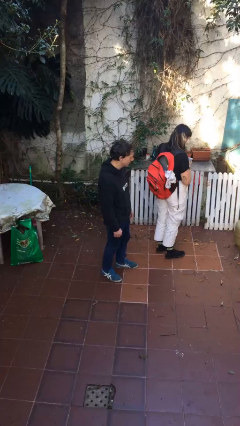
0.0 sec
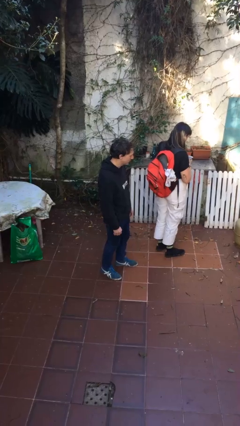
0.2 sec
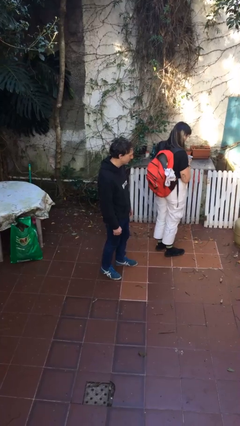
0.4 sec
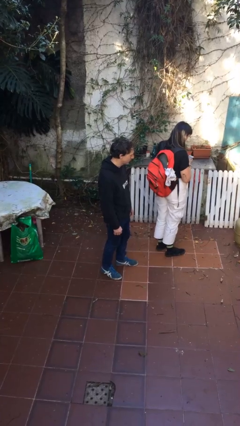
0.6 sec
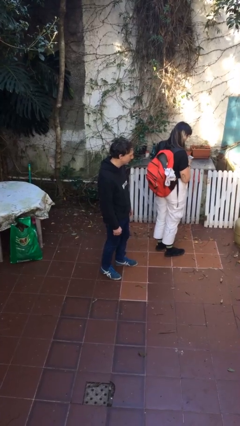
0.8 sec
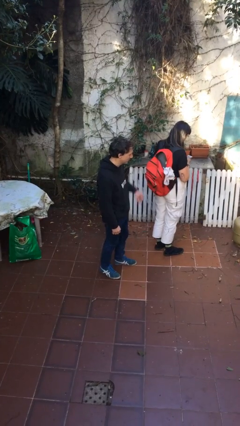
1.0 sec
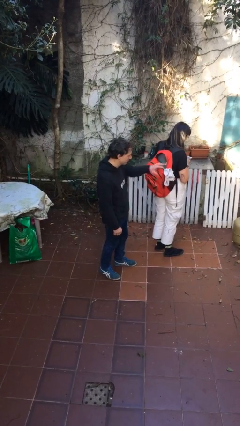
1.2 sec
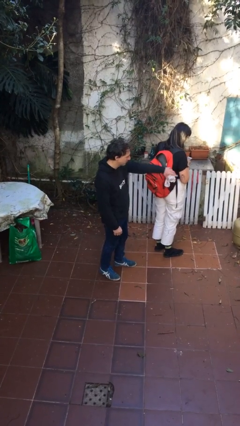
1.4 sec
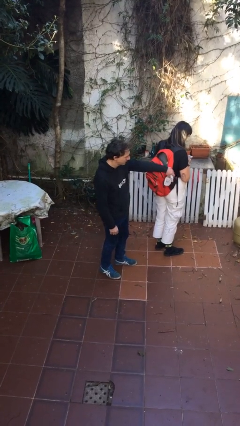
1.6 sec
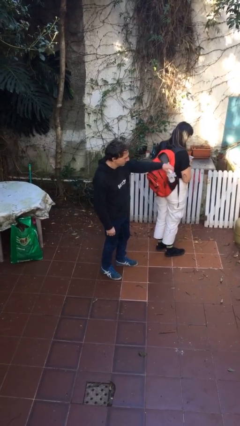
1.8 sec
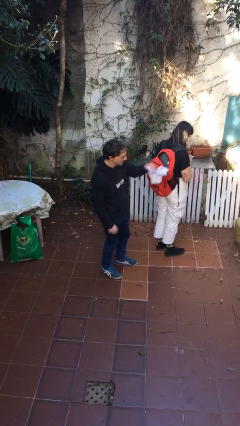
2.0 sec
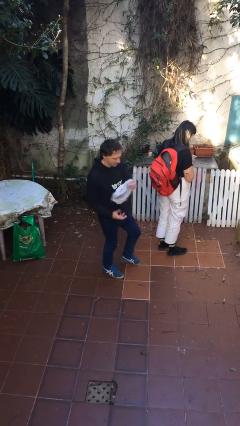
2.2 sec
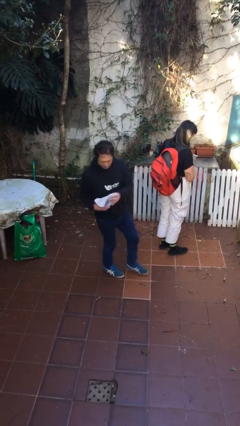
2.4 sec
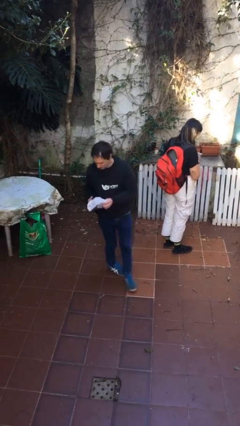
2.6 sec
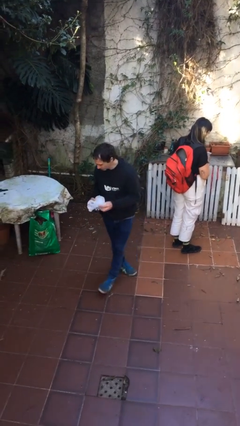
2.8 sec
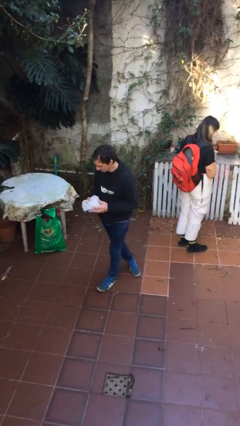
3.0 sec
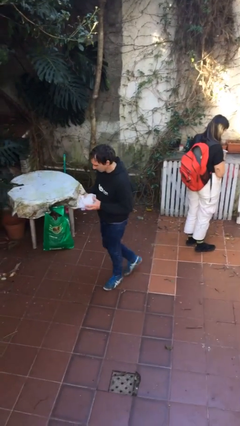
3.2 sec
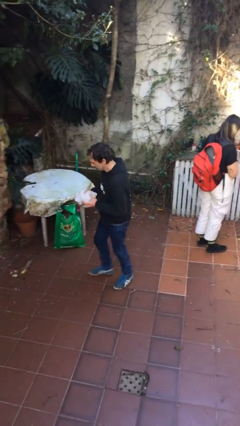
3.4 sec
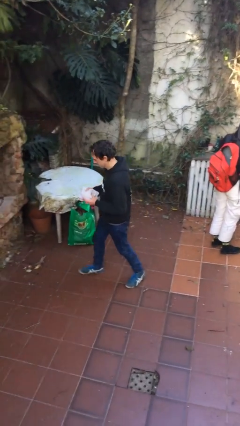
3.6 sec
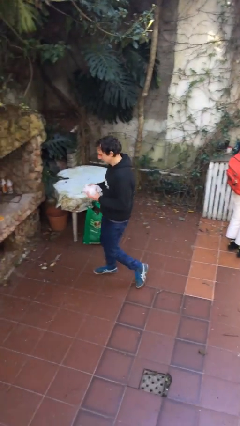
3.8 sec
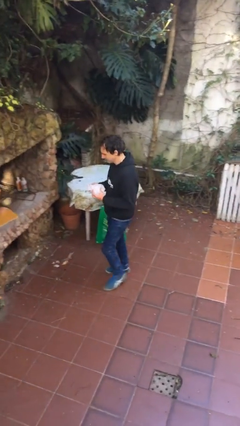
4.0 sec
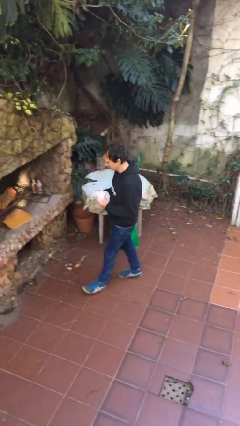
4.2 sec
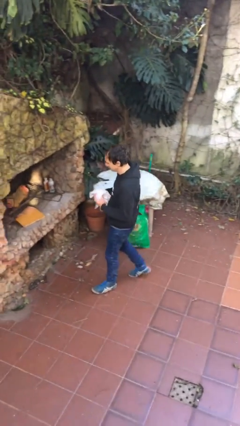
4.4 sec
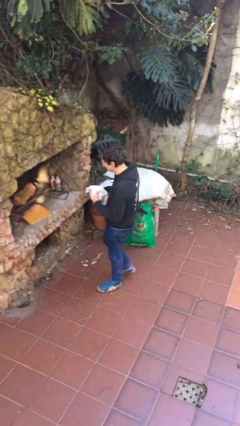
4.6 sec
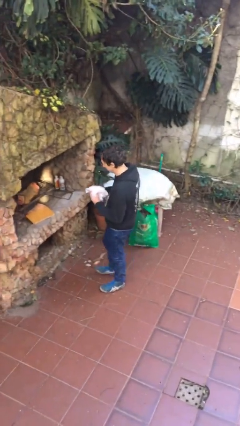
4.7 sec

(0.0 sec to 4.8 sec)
person steals object from person

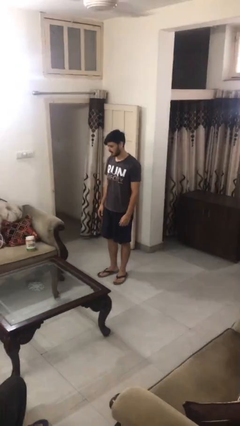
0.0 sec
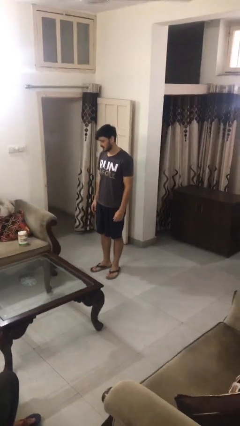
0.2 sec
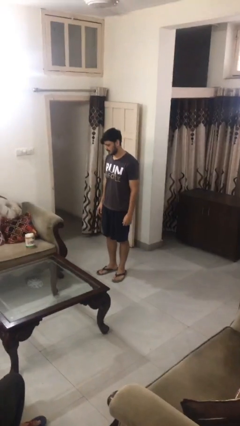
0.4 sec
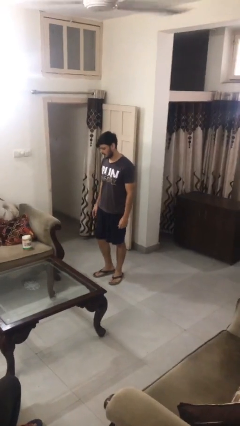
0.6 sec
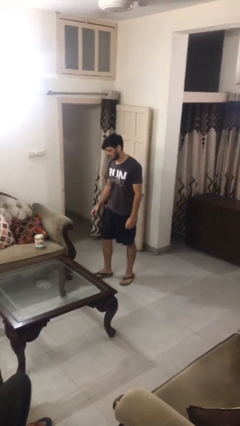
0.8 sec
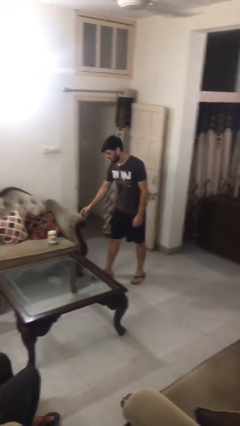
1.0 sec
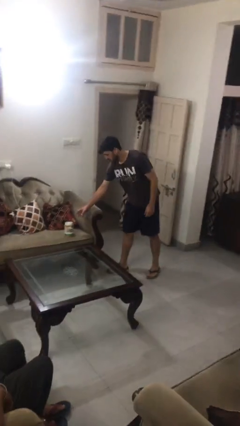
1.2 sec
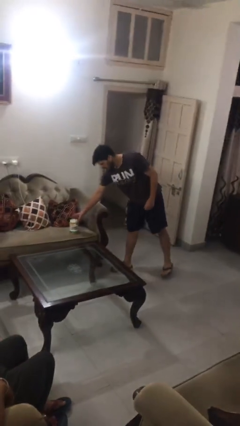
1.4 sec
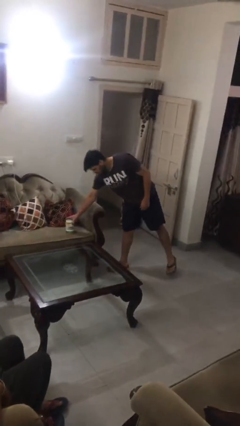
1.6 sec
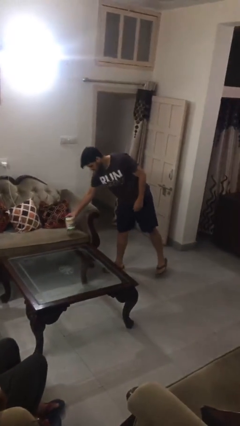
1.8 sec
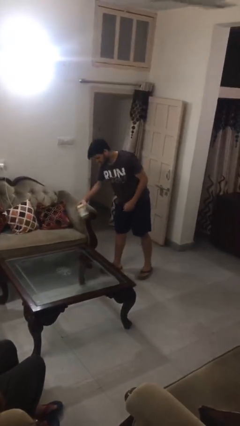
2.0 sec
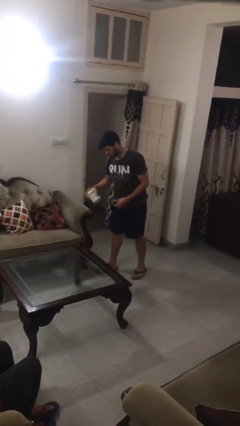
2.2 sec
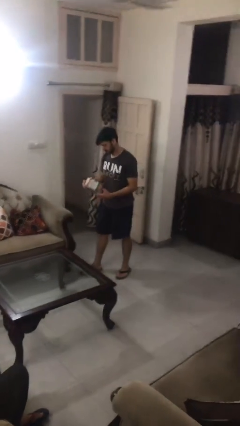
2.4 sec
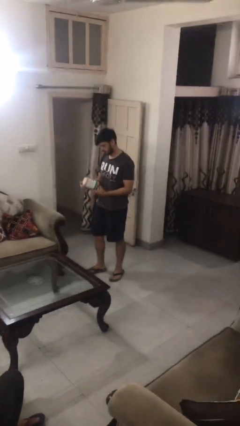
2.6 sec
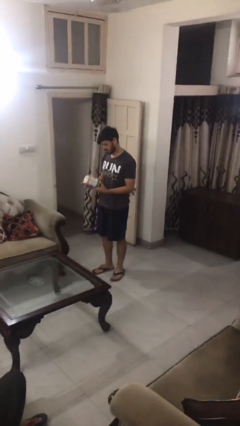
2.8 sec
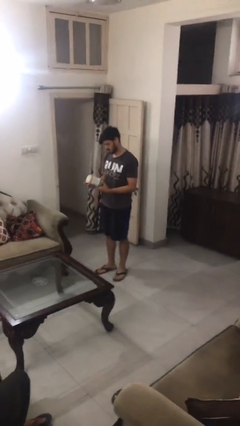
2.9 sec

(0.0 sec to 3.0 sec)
person picks up object from couch

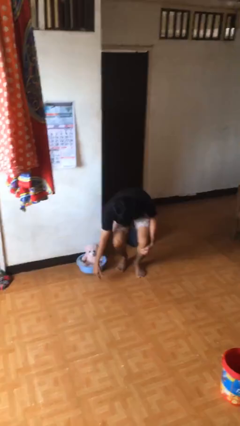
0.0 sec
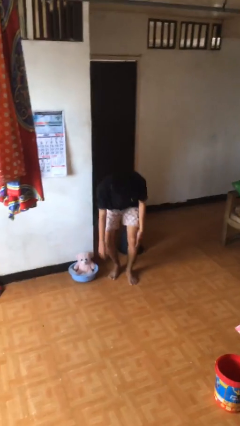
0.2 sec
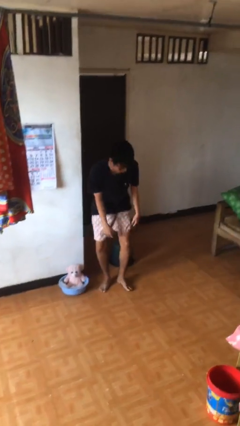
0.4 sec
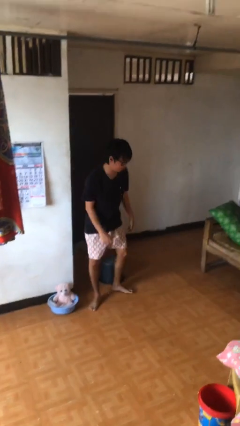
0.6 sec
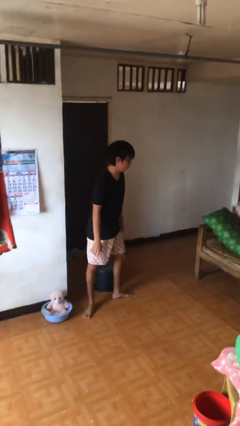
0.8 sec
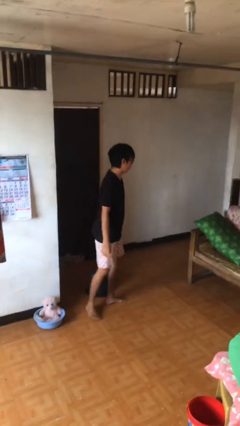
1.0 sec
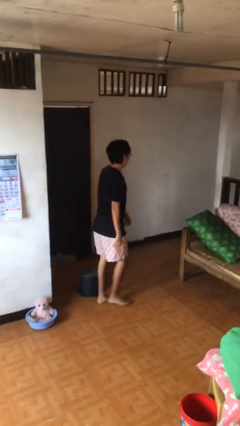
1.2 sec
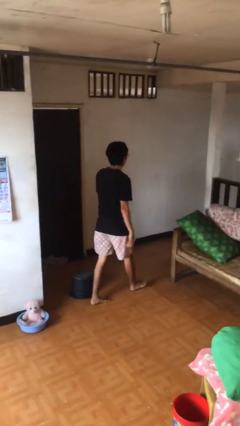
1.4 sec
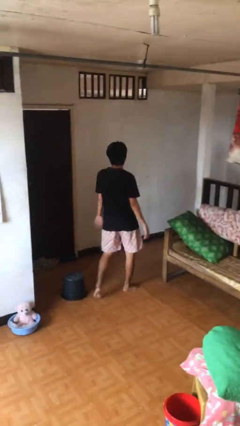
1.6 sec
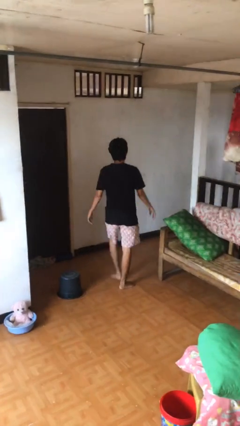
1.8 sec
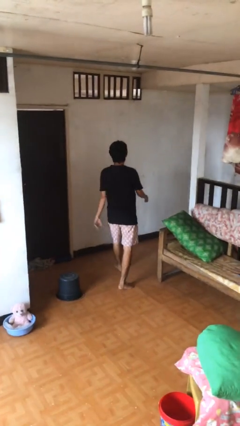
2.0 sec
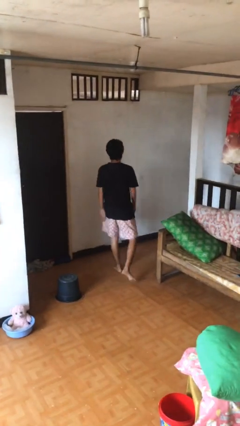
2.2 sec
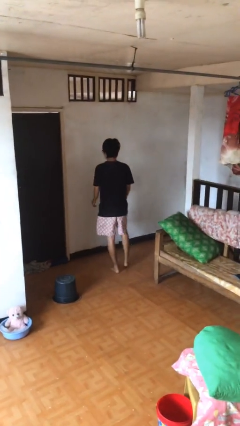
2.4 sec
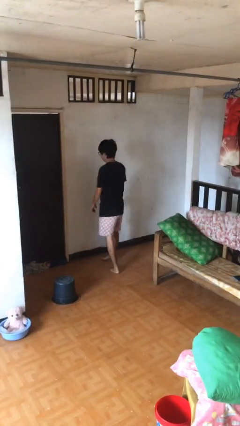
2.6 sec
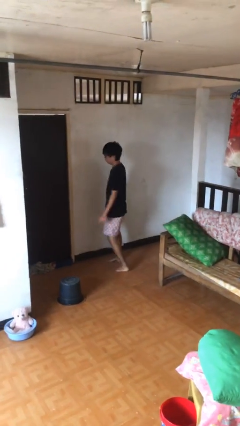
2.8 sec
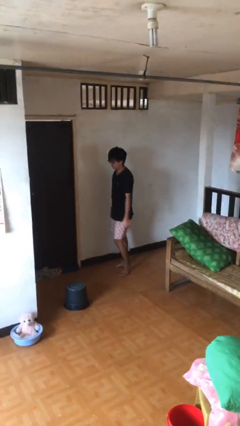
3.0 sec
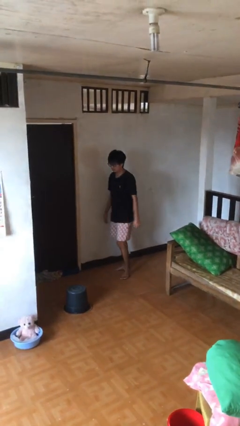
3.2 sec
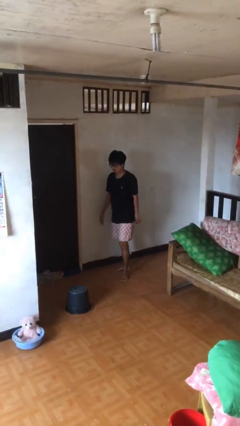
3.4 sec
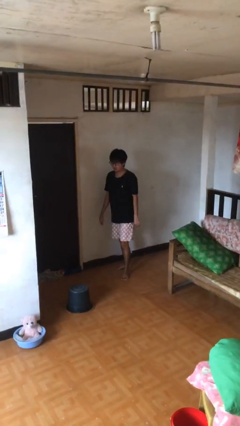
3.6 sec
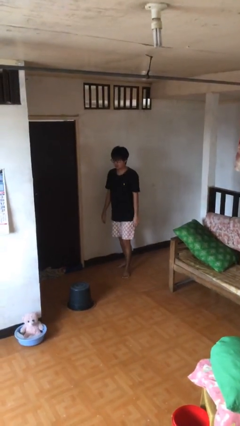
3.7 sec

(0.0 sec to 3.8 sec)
person stands up from floor

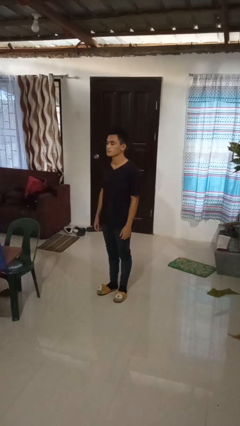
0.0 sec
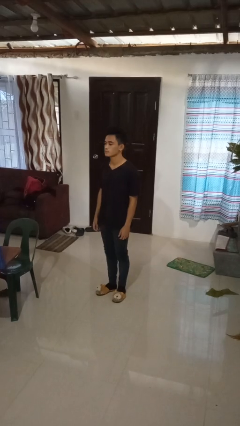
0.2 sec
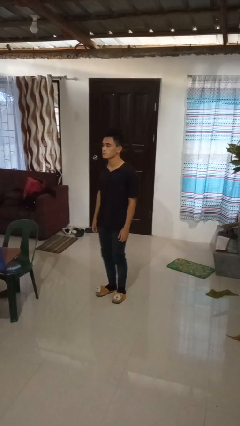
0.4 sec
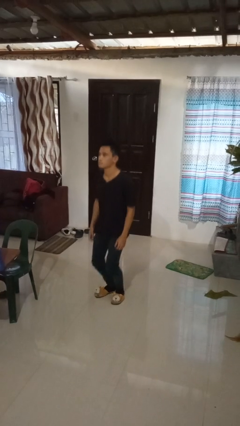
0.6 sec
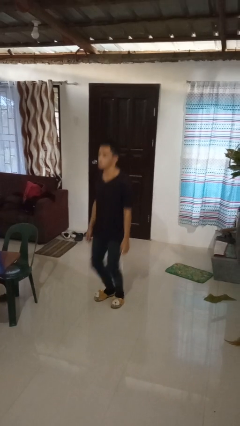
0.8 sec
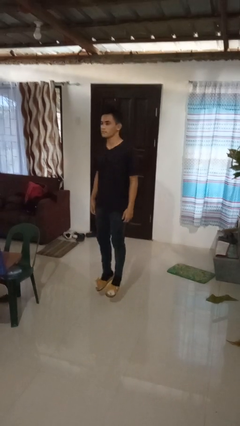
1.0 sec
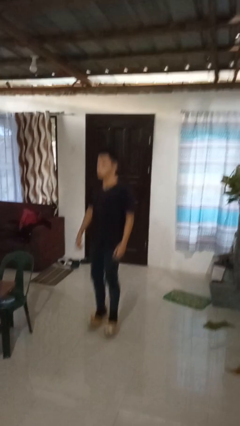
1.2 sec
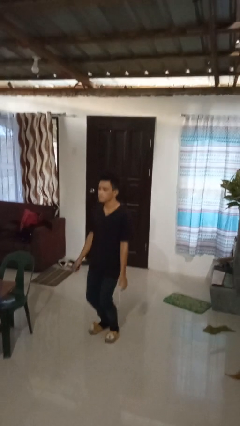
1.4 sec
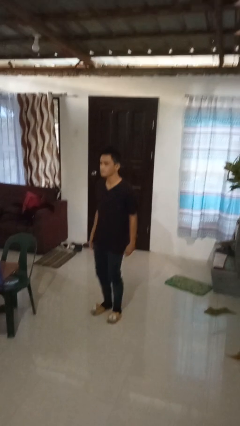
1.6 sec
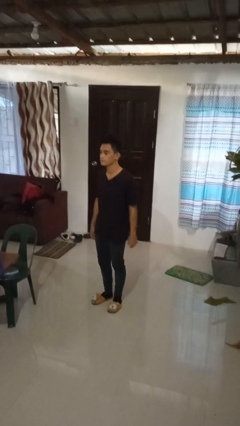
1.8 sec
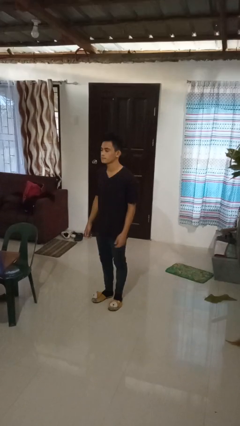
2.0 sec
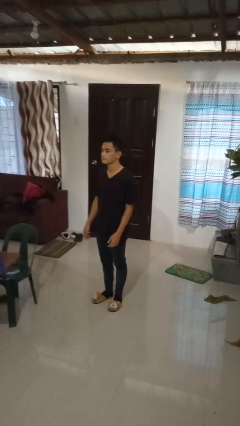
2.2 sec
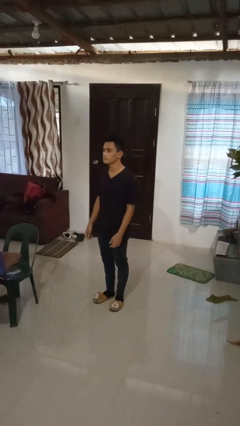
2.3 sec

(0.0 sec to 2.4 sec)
person jumps

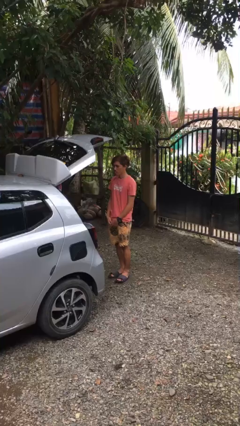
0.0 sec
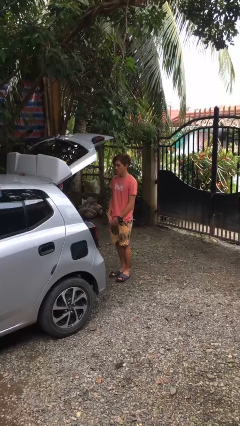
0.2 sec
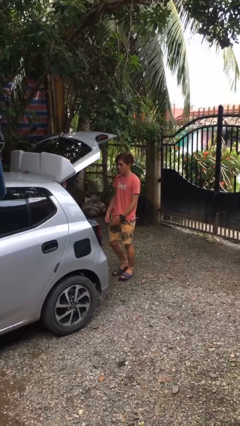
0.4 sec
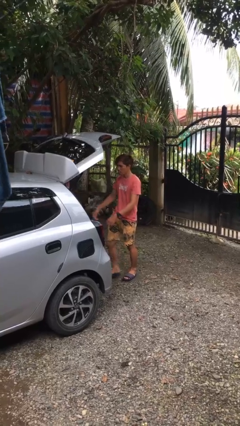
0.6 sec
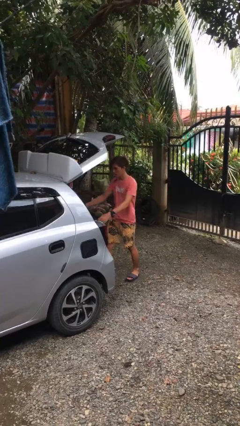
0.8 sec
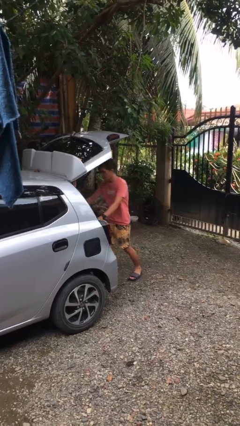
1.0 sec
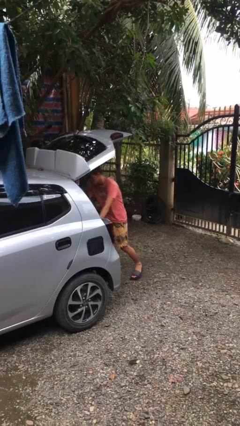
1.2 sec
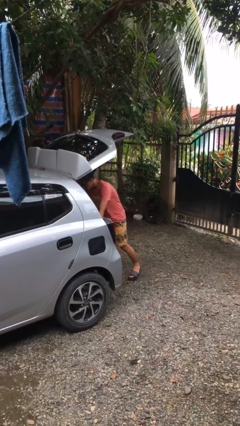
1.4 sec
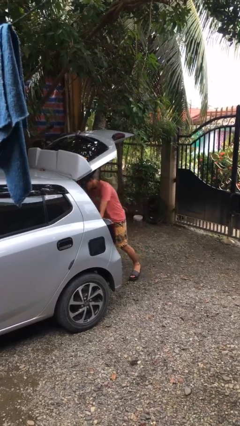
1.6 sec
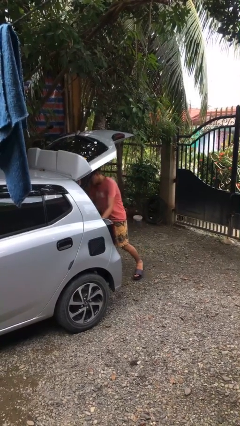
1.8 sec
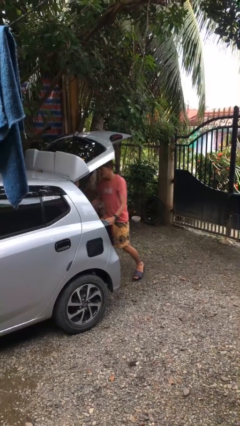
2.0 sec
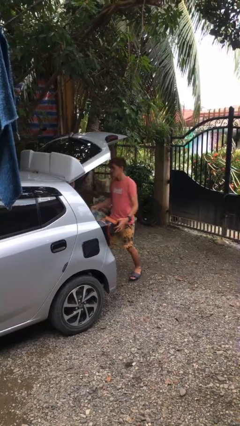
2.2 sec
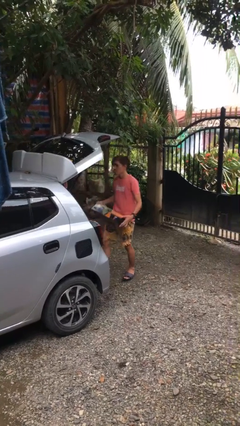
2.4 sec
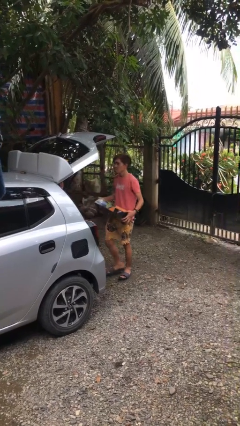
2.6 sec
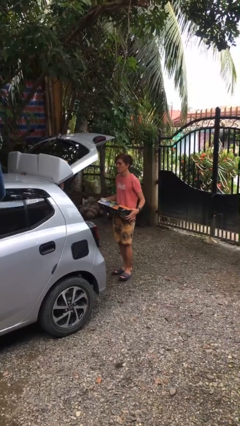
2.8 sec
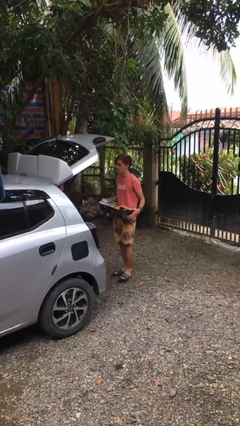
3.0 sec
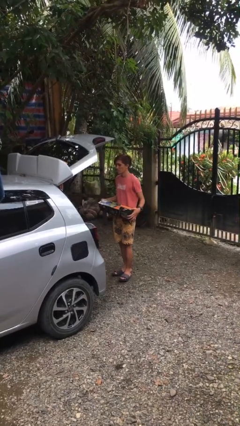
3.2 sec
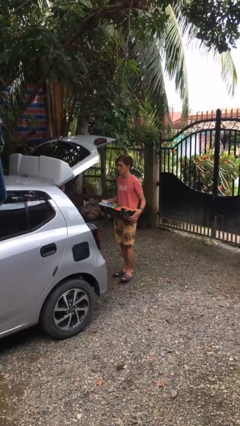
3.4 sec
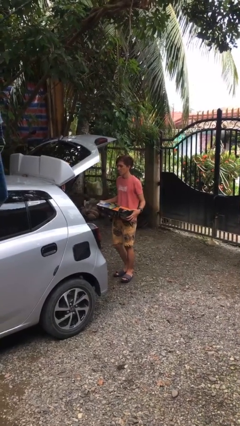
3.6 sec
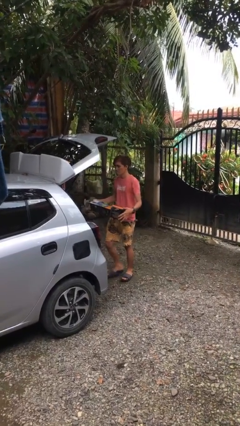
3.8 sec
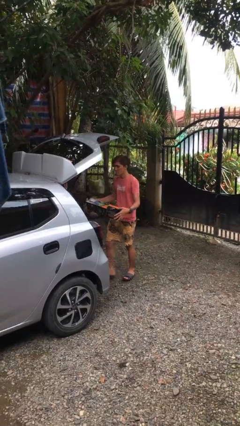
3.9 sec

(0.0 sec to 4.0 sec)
person unloads car
